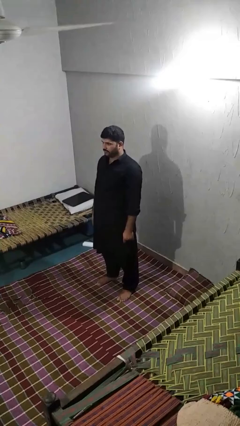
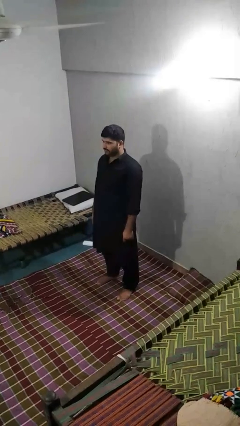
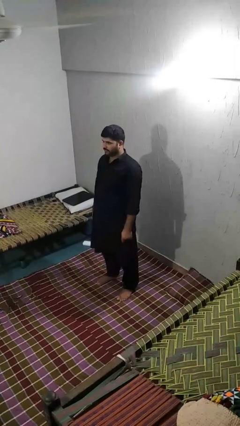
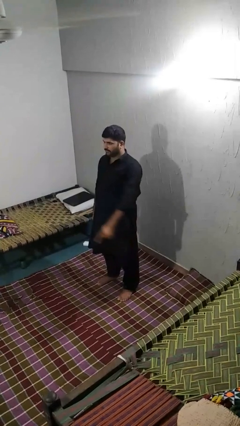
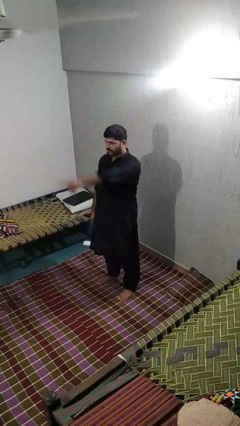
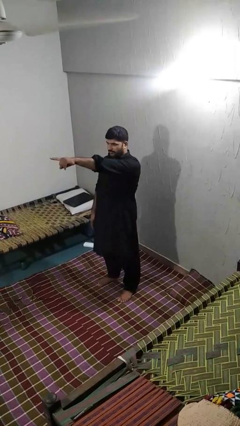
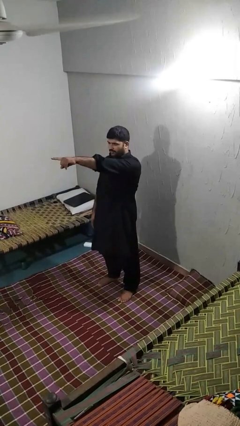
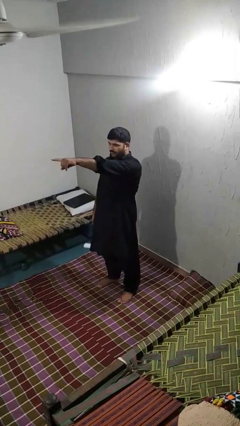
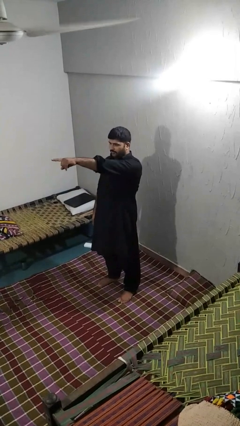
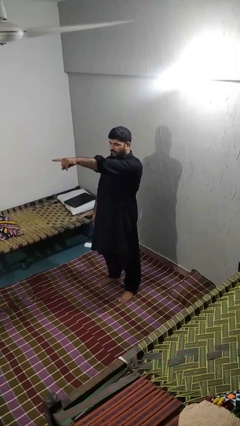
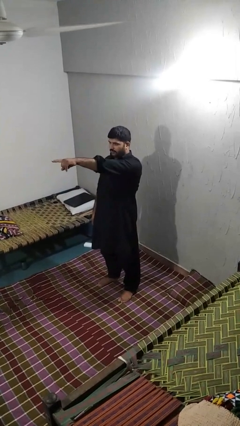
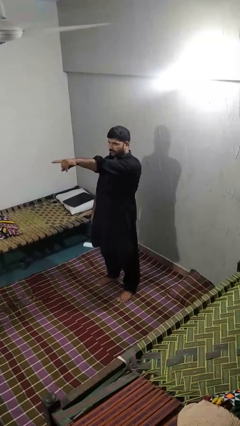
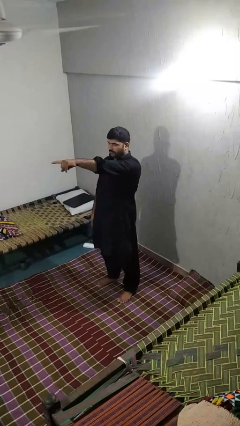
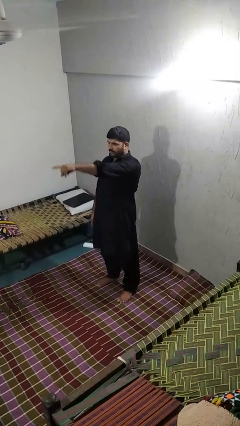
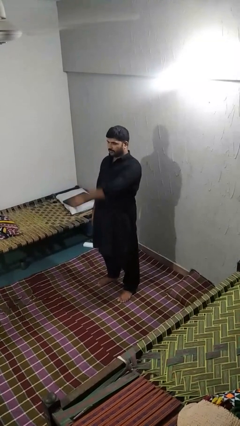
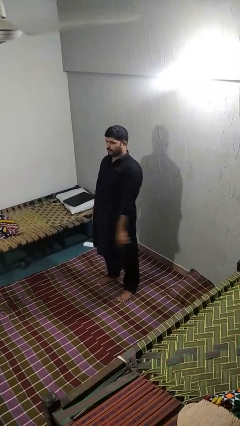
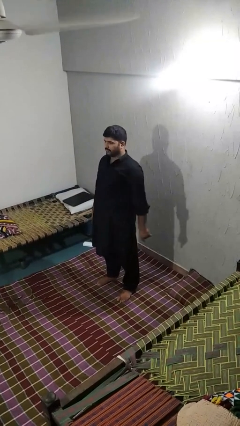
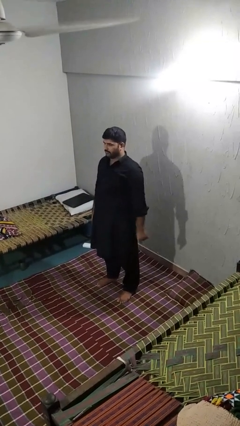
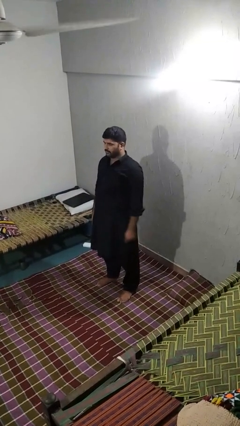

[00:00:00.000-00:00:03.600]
person points at person

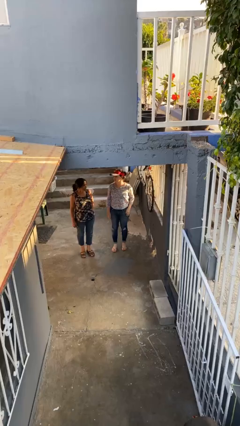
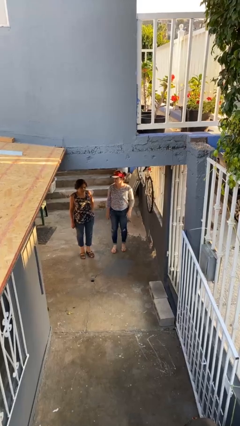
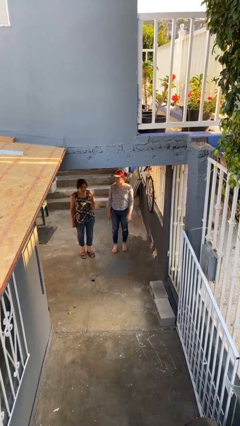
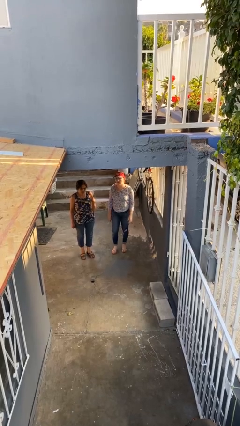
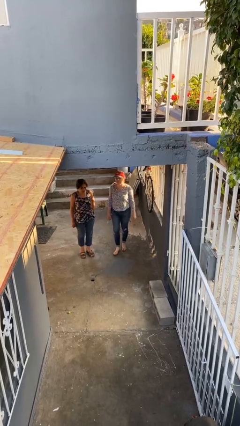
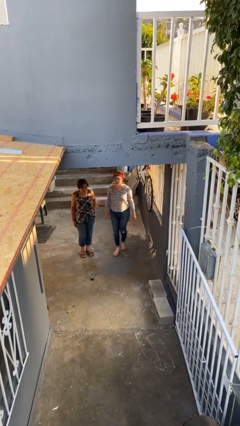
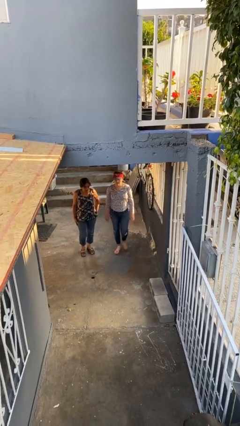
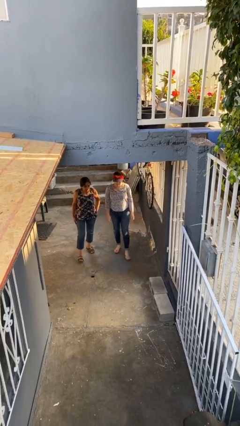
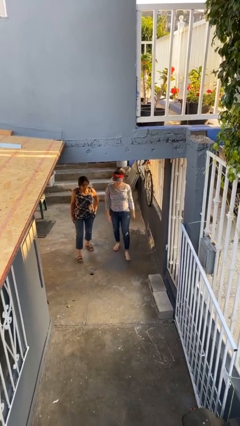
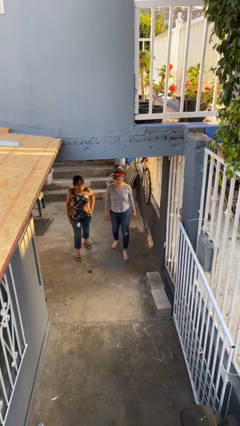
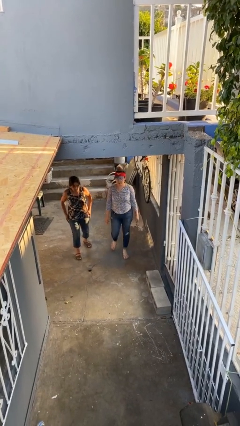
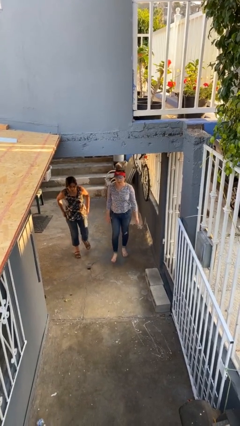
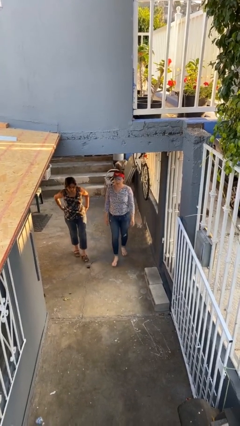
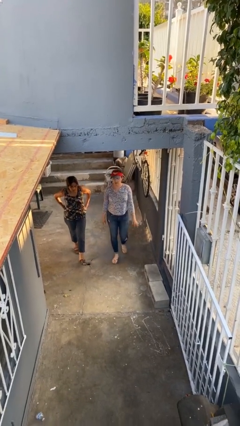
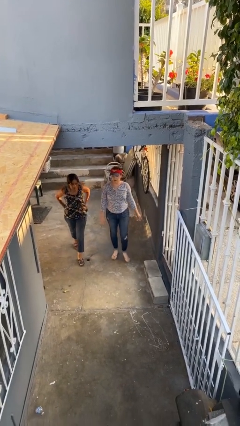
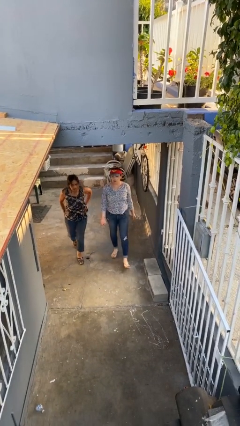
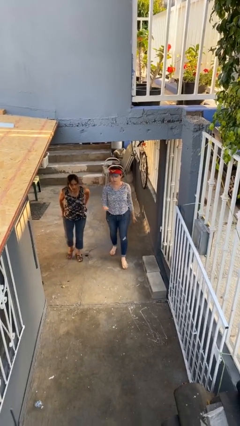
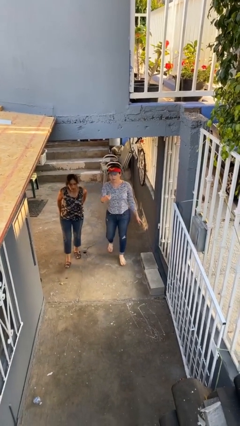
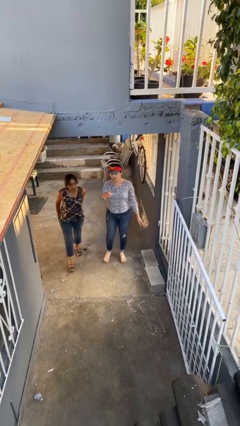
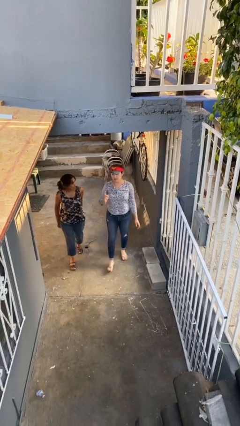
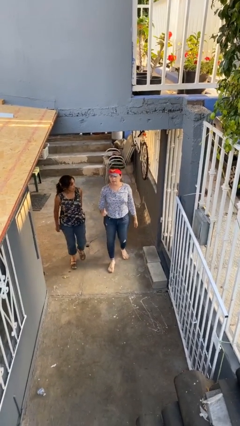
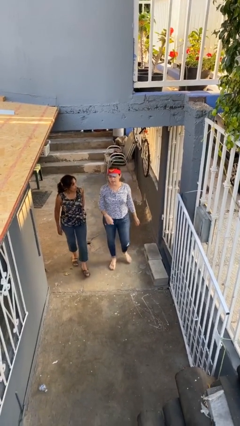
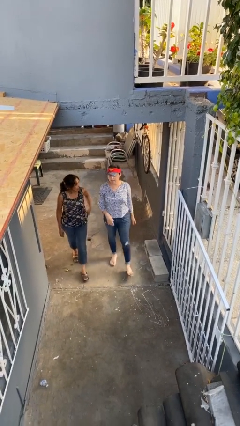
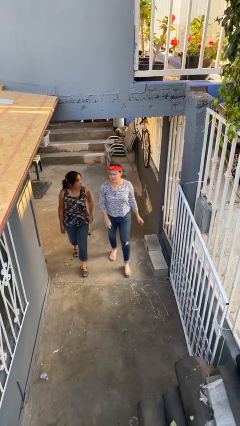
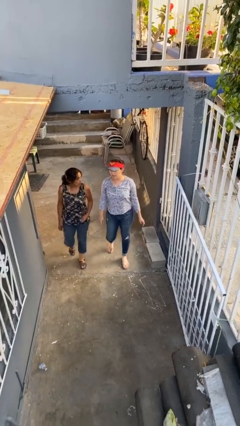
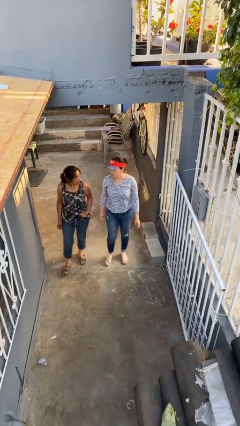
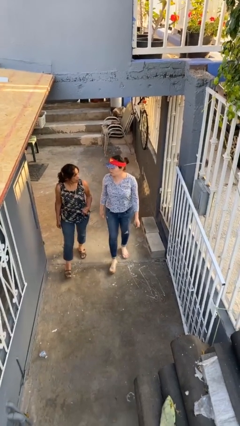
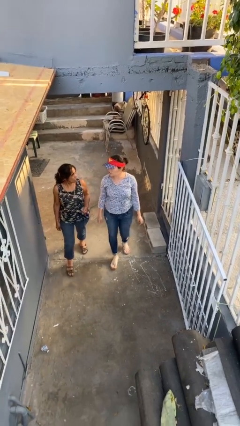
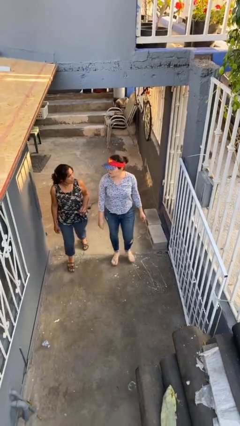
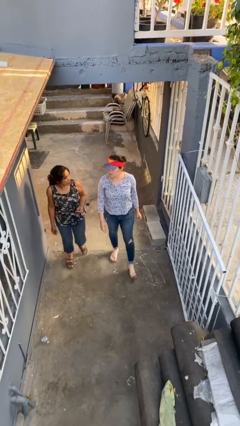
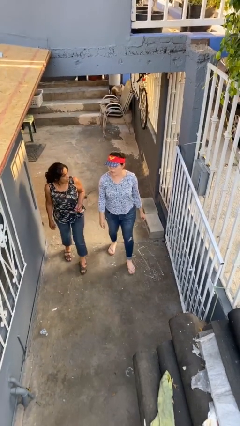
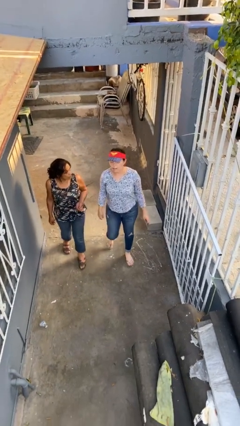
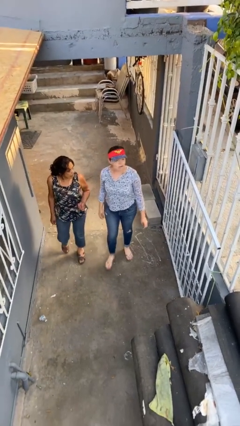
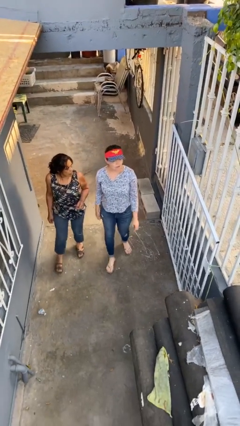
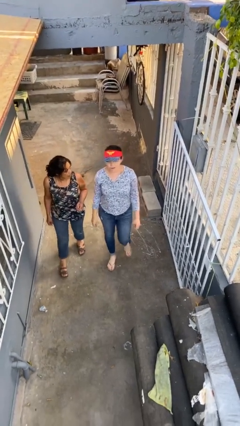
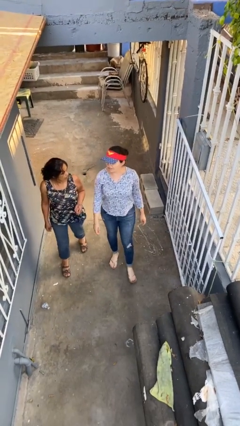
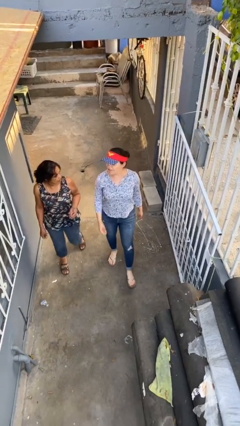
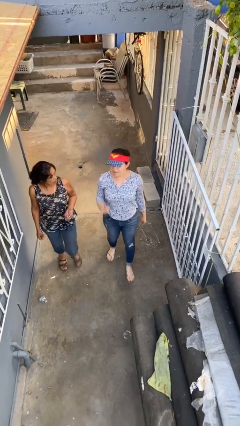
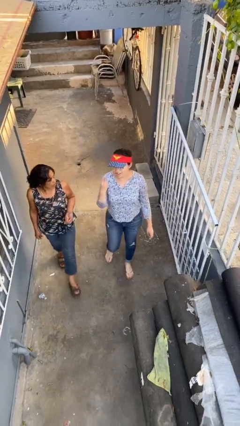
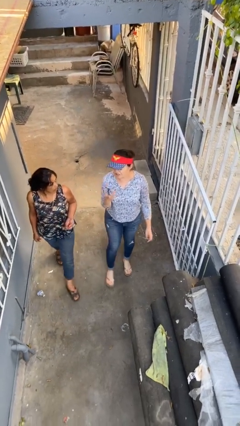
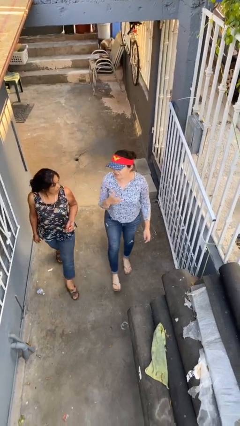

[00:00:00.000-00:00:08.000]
person talks to person

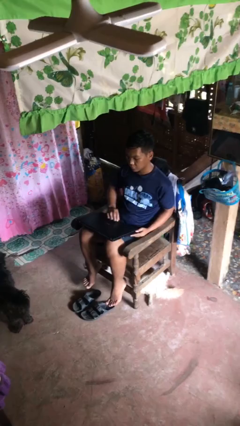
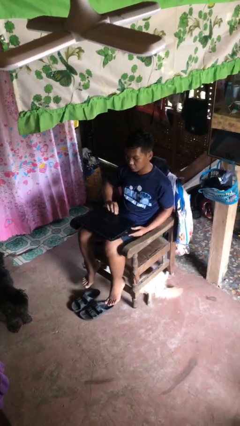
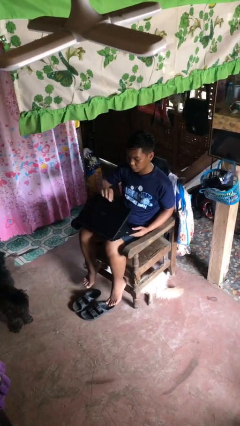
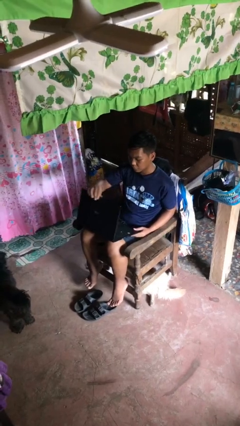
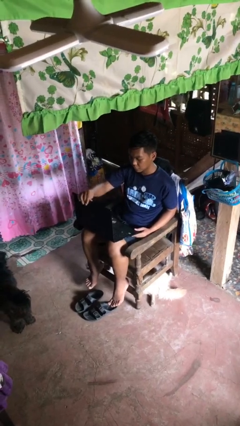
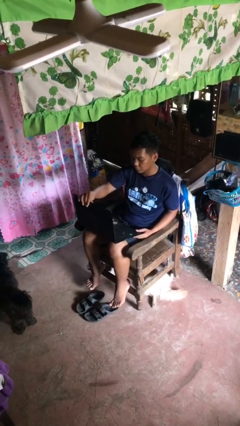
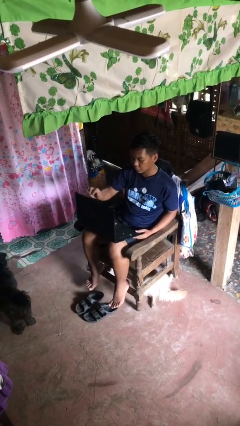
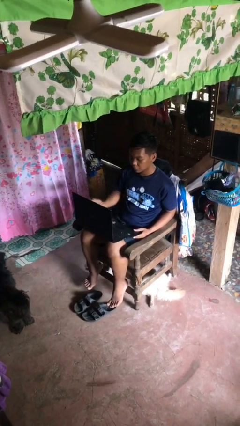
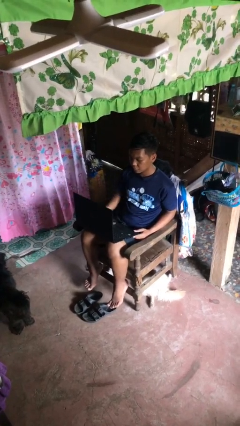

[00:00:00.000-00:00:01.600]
person opens laptop

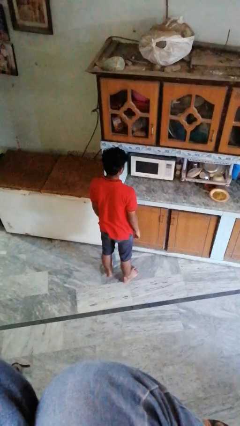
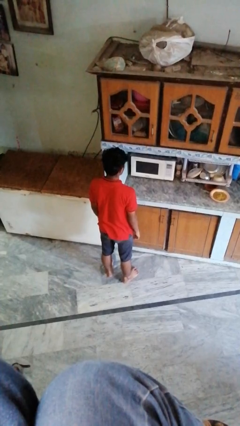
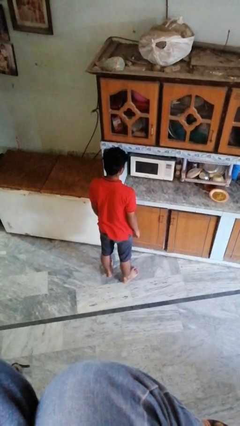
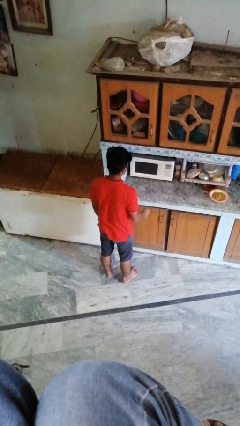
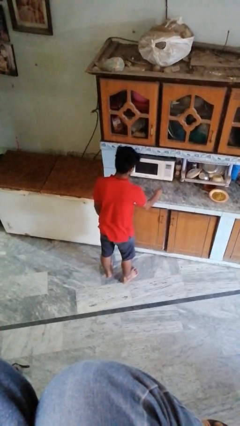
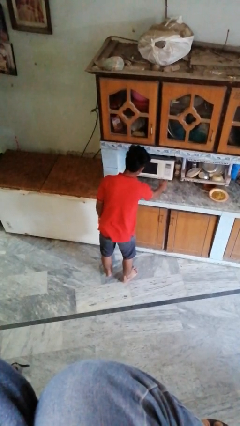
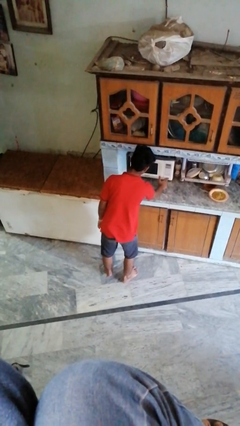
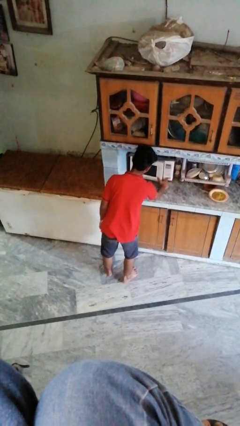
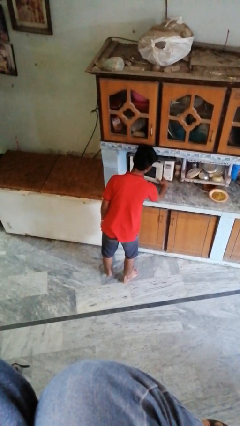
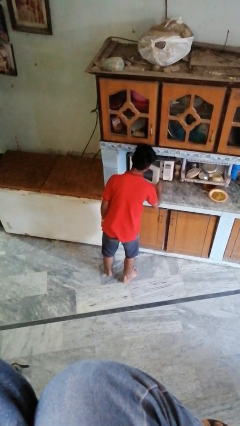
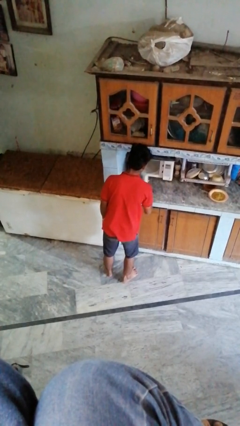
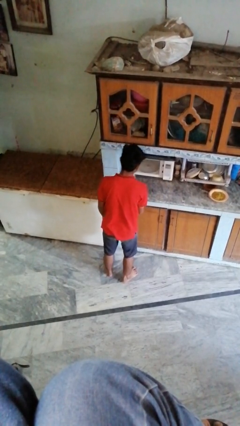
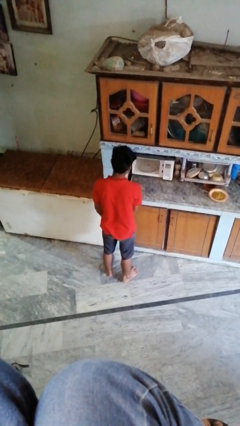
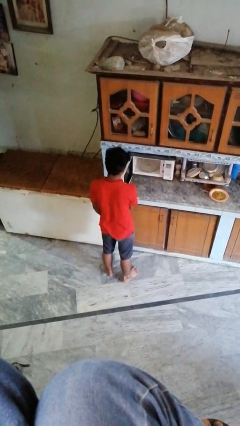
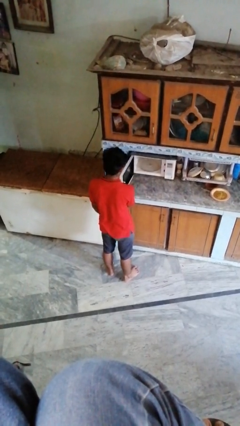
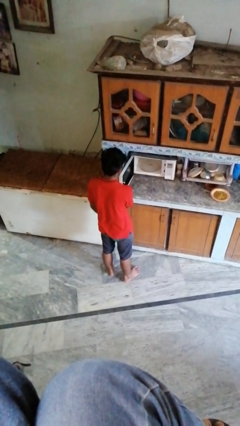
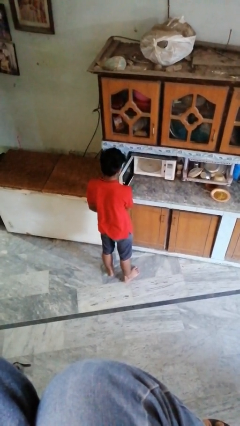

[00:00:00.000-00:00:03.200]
person opens oven door

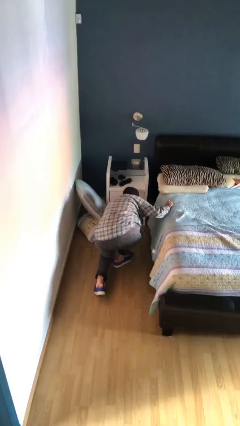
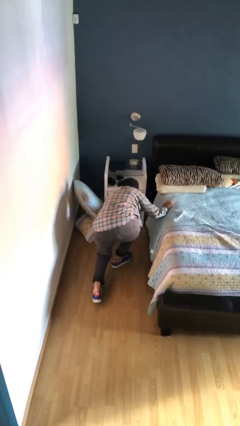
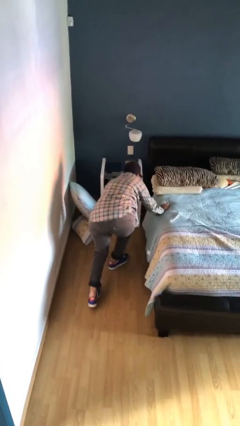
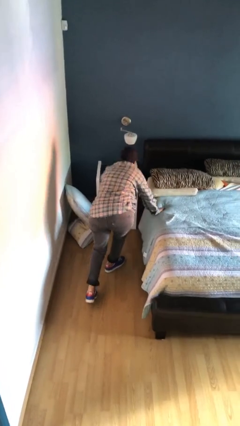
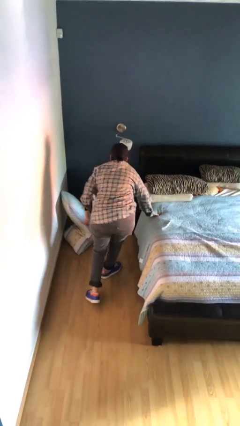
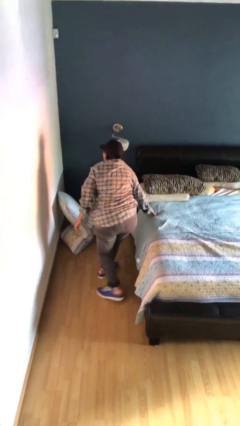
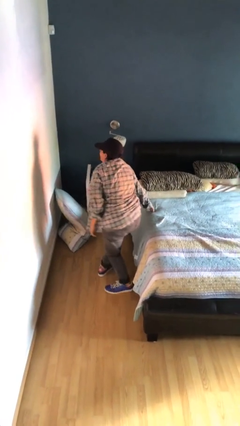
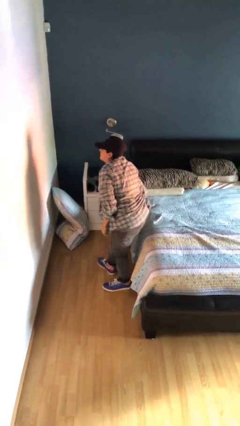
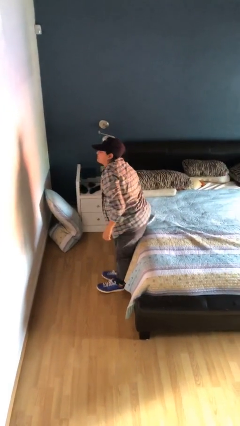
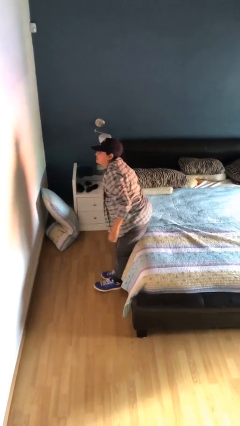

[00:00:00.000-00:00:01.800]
person stands up from floor
